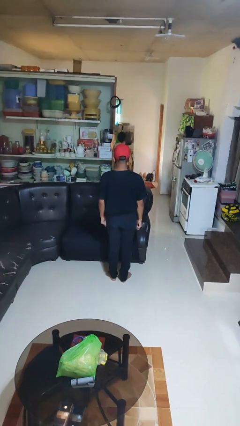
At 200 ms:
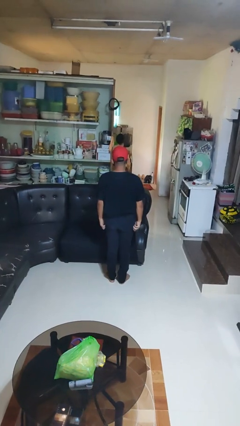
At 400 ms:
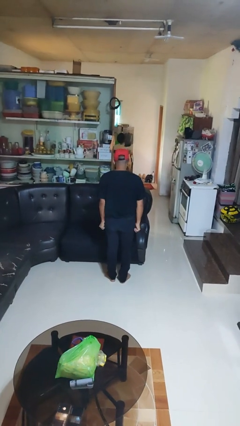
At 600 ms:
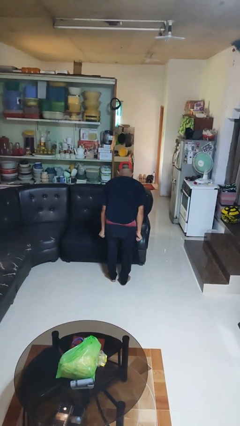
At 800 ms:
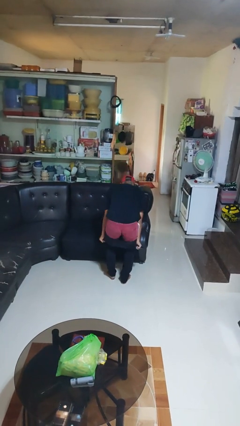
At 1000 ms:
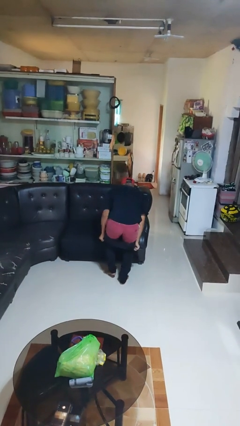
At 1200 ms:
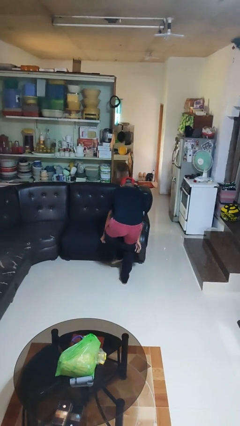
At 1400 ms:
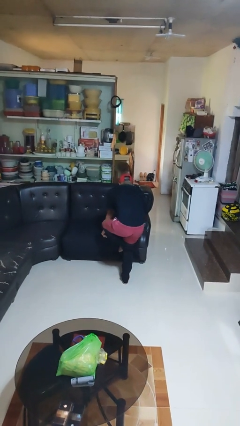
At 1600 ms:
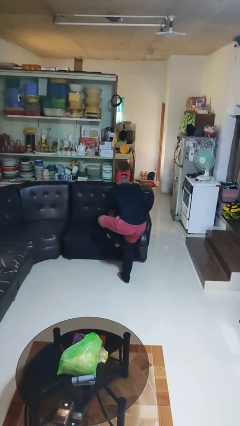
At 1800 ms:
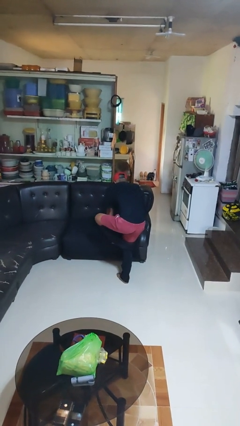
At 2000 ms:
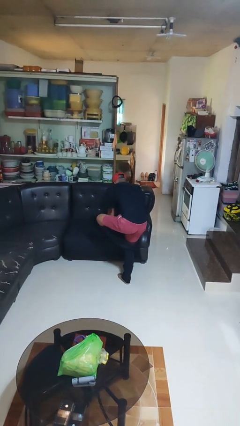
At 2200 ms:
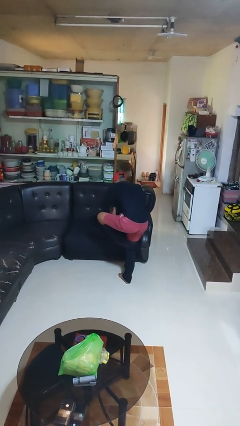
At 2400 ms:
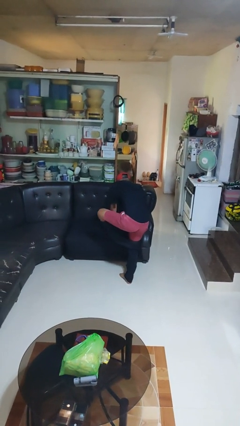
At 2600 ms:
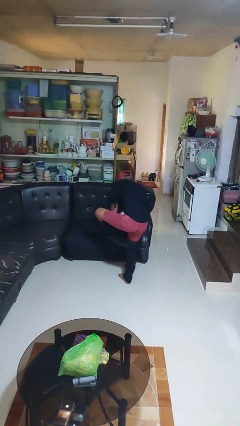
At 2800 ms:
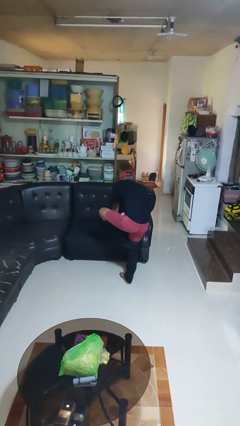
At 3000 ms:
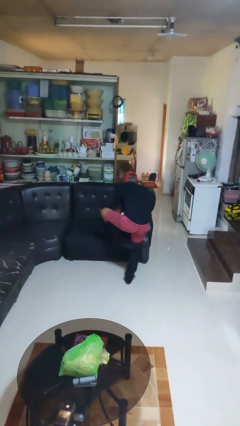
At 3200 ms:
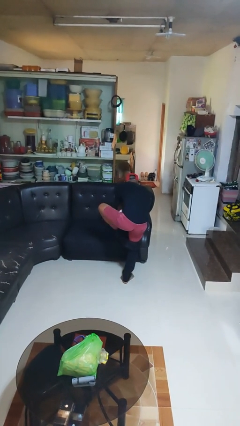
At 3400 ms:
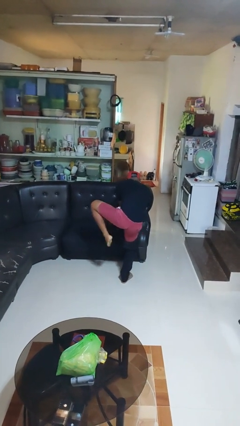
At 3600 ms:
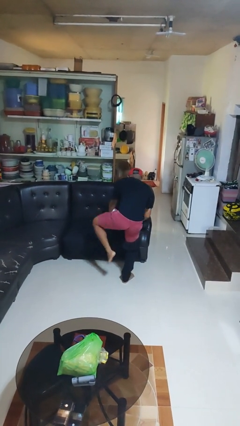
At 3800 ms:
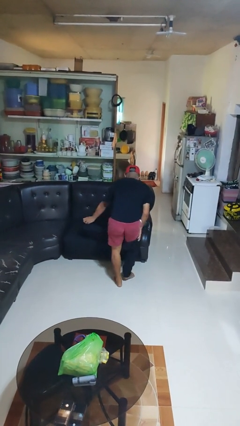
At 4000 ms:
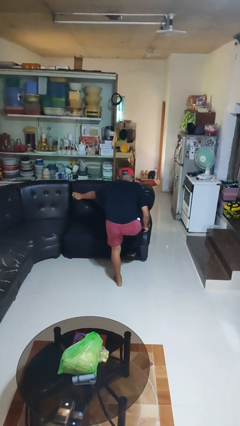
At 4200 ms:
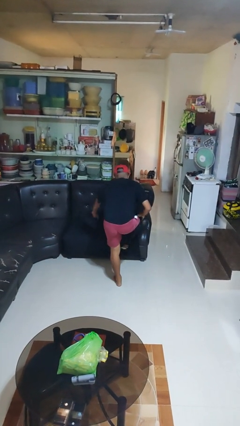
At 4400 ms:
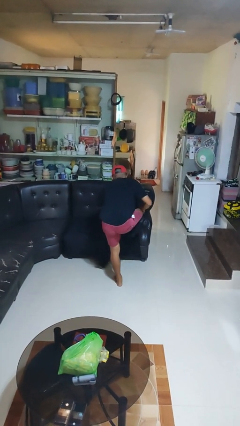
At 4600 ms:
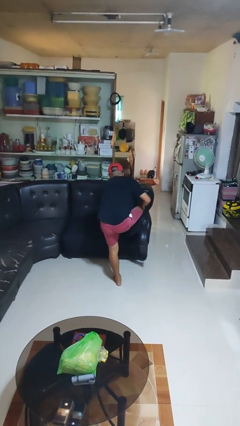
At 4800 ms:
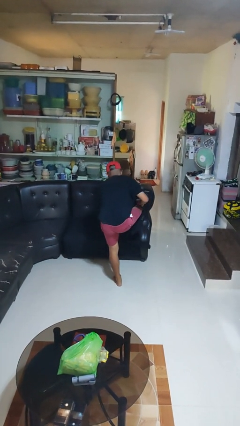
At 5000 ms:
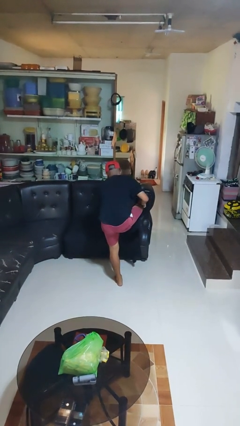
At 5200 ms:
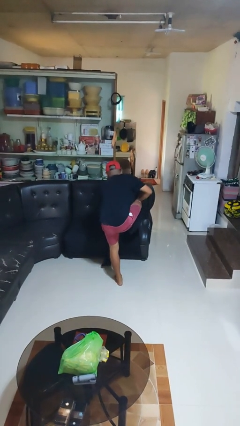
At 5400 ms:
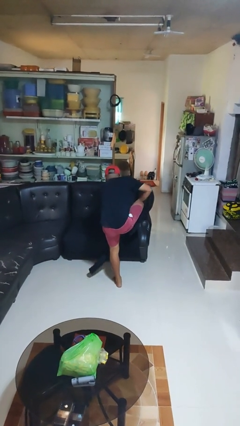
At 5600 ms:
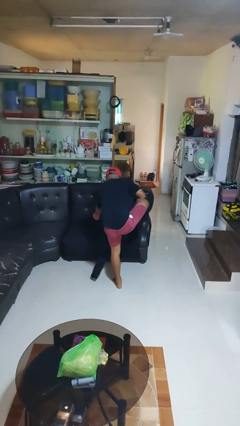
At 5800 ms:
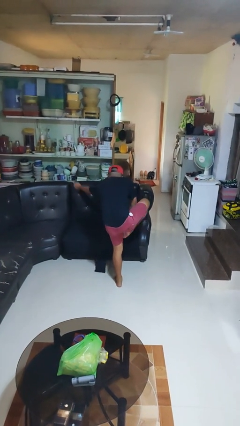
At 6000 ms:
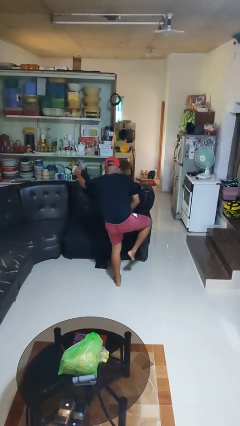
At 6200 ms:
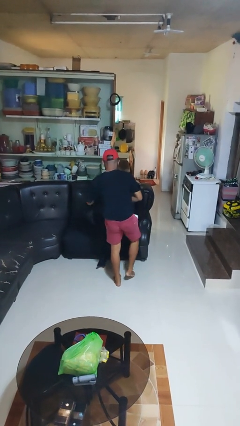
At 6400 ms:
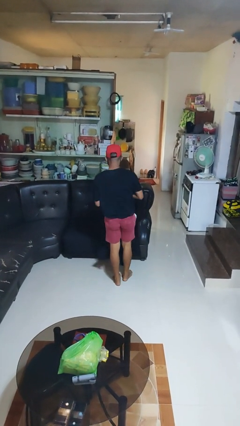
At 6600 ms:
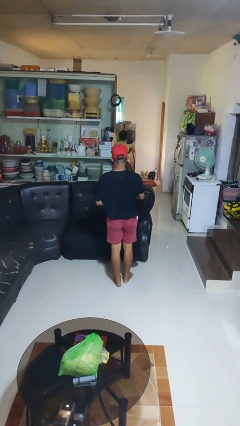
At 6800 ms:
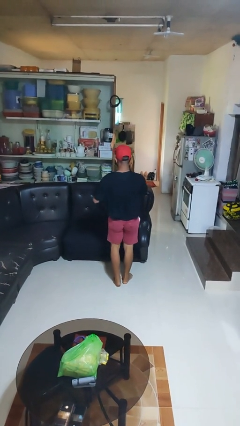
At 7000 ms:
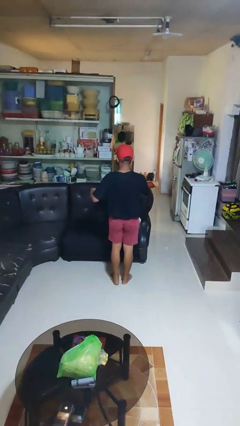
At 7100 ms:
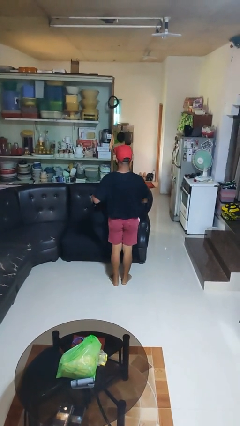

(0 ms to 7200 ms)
person takes off pants

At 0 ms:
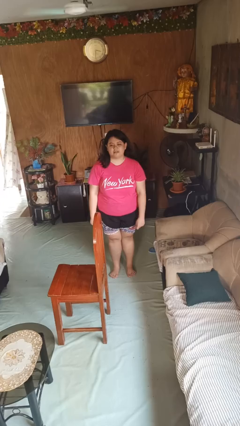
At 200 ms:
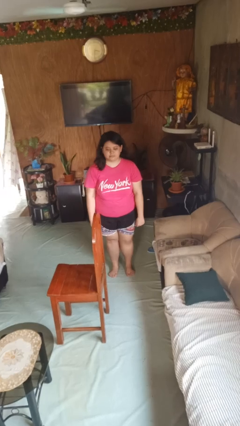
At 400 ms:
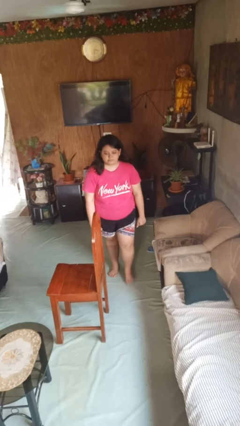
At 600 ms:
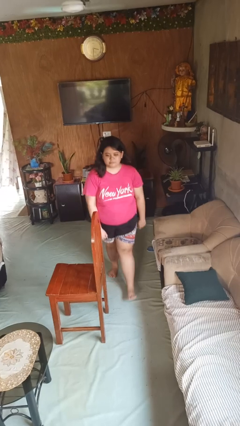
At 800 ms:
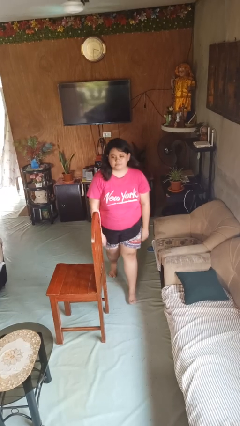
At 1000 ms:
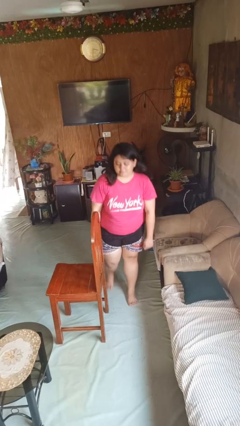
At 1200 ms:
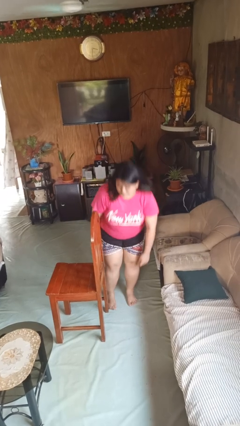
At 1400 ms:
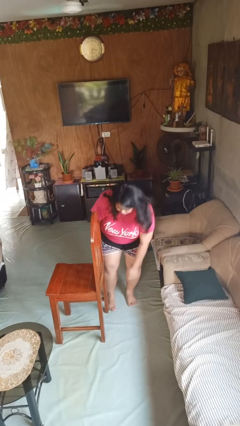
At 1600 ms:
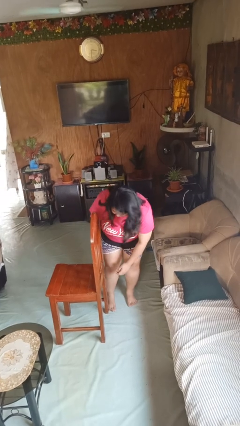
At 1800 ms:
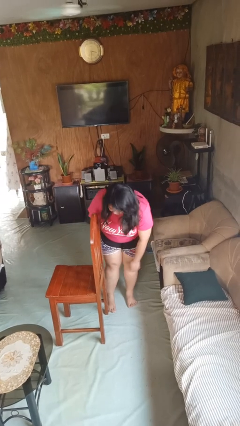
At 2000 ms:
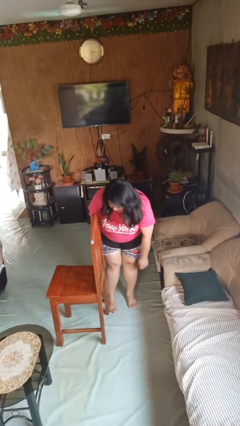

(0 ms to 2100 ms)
person stubs toe

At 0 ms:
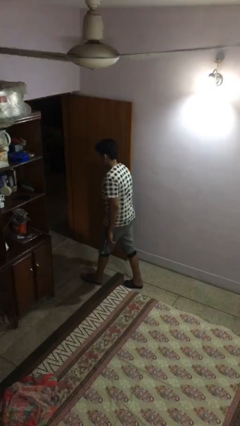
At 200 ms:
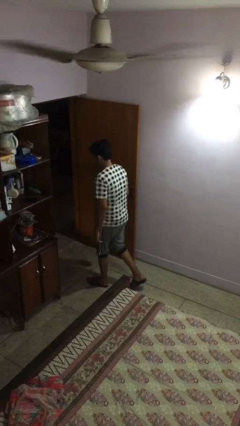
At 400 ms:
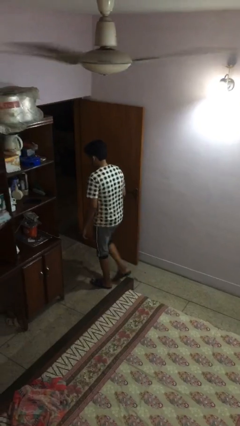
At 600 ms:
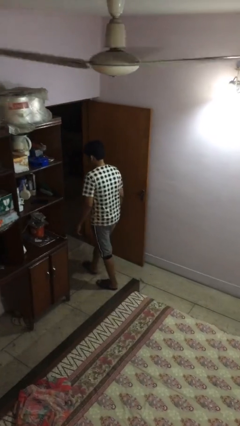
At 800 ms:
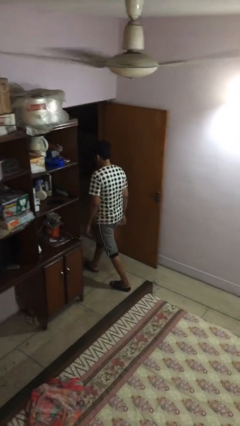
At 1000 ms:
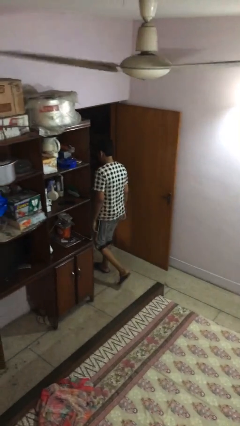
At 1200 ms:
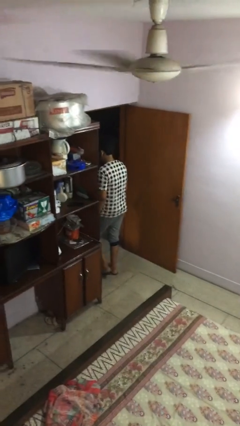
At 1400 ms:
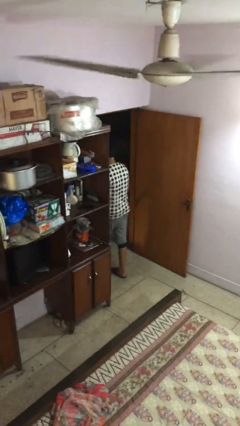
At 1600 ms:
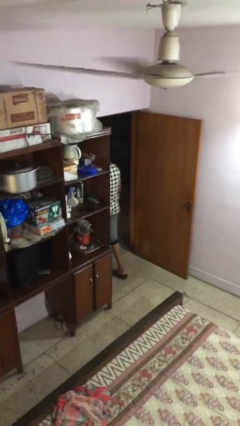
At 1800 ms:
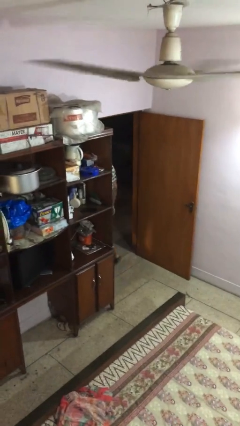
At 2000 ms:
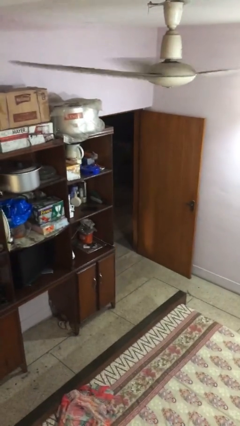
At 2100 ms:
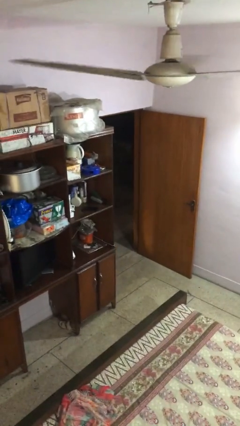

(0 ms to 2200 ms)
person exits scene through structure

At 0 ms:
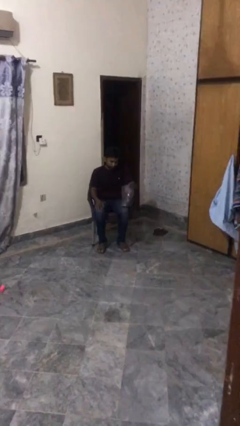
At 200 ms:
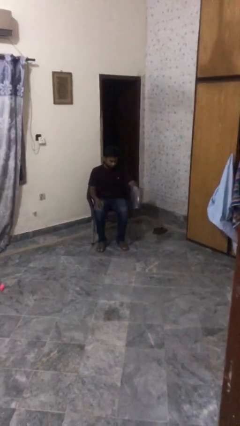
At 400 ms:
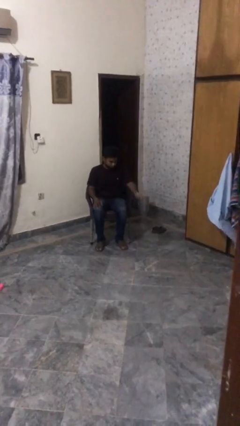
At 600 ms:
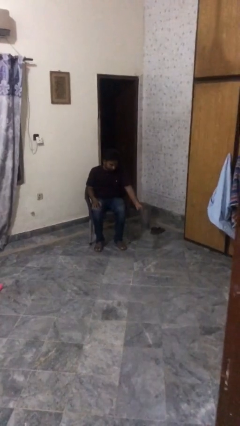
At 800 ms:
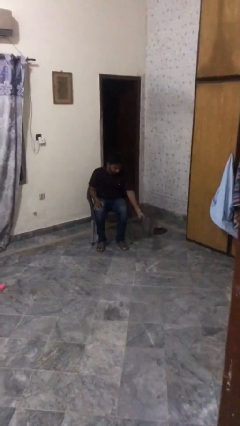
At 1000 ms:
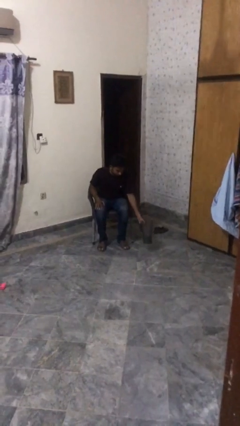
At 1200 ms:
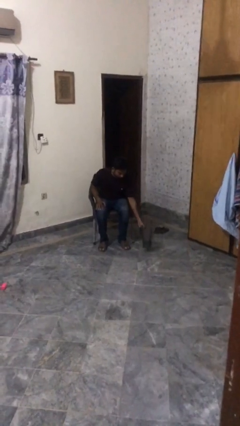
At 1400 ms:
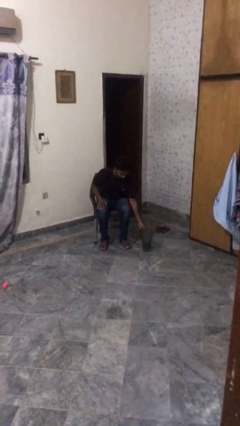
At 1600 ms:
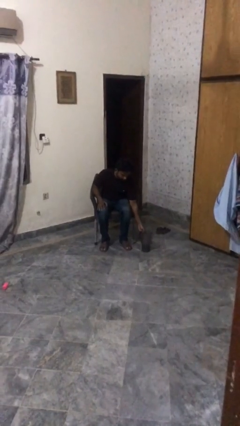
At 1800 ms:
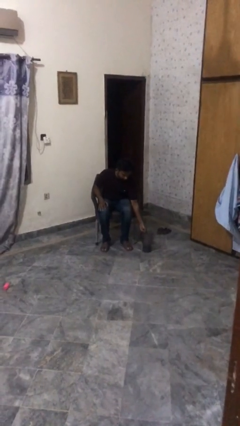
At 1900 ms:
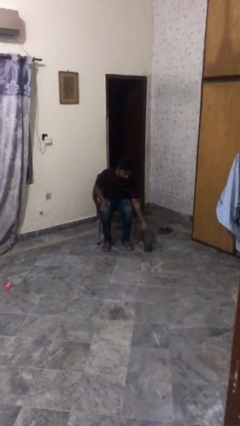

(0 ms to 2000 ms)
person puts down object on floor

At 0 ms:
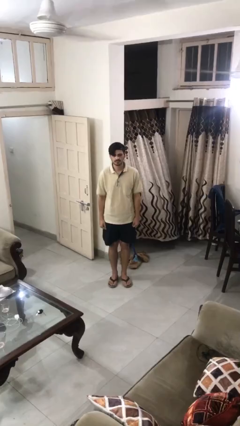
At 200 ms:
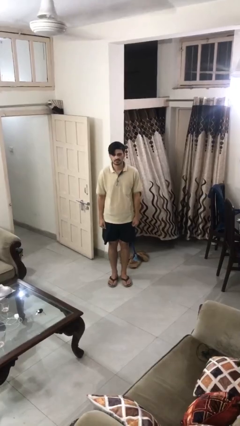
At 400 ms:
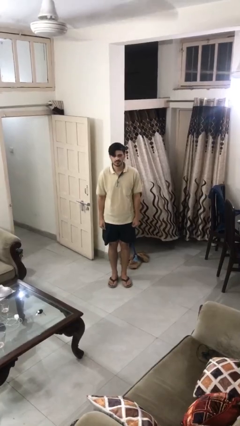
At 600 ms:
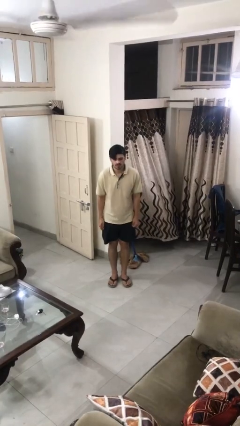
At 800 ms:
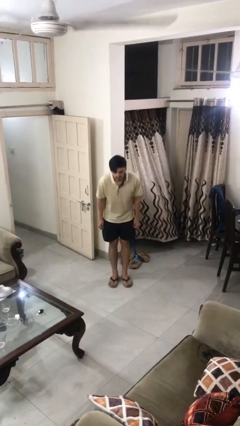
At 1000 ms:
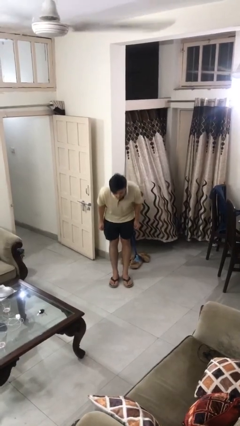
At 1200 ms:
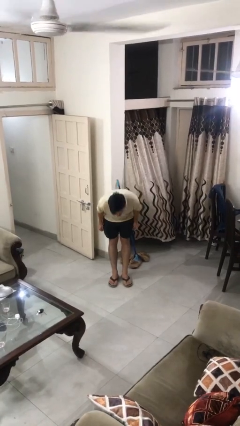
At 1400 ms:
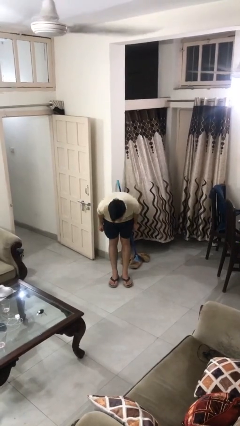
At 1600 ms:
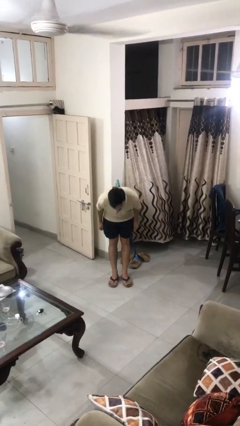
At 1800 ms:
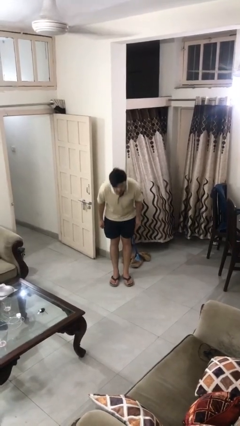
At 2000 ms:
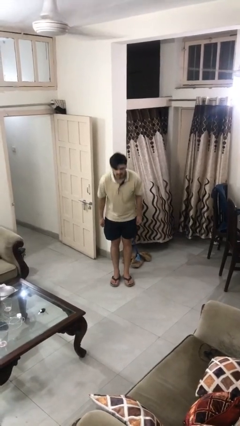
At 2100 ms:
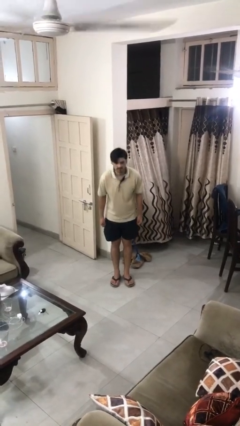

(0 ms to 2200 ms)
person bows

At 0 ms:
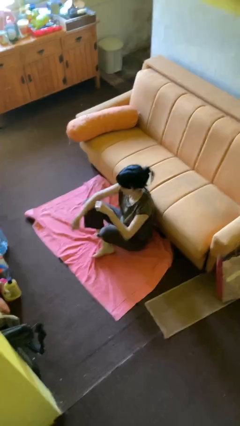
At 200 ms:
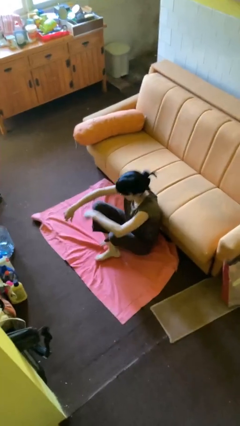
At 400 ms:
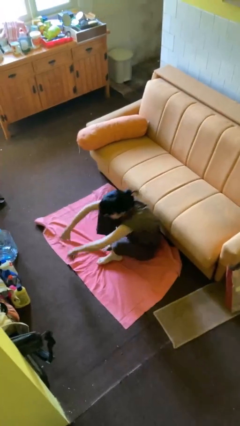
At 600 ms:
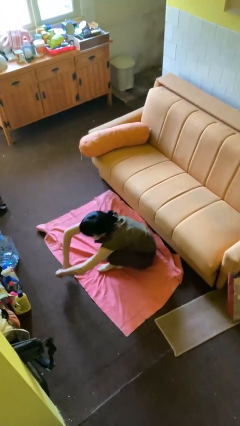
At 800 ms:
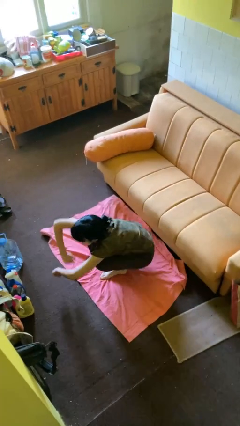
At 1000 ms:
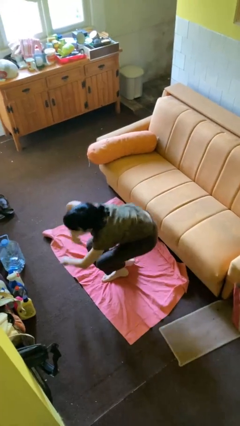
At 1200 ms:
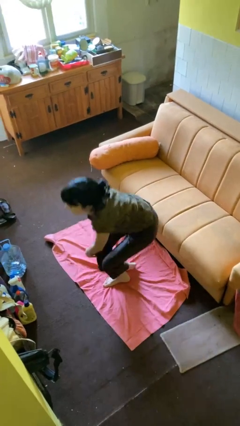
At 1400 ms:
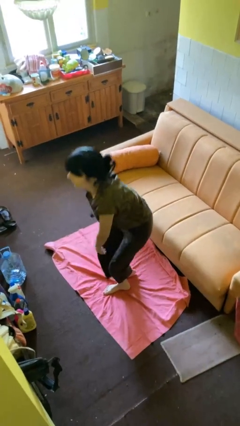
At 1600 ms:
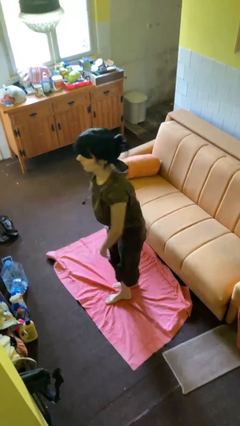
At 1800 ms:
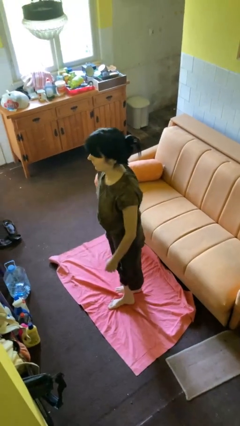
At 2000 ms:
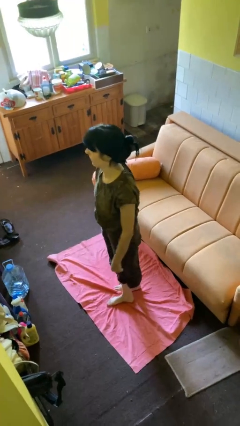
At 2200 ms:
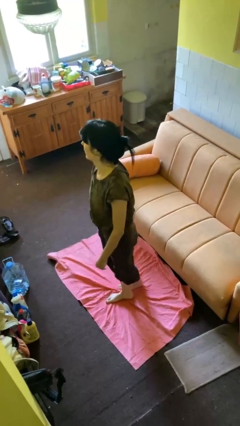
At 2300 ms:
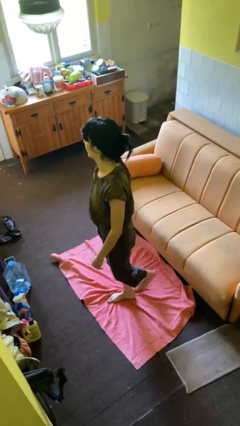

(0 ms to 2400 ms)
person stands up from floor
